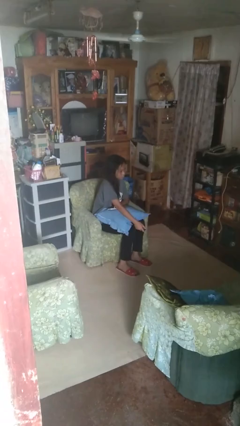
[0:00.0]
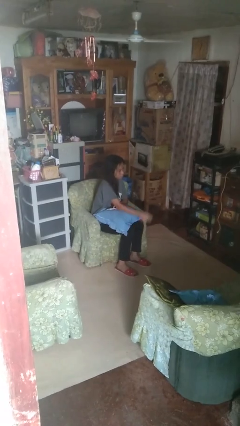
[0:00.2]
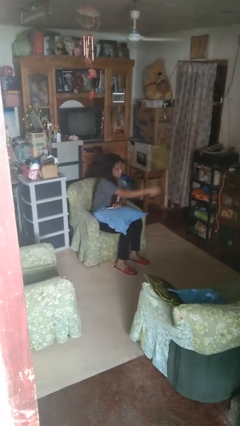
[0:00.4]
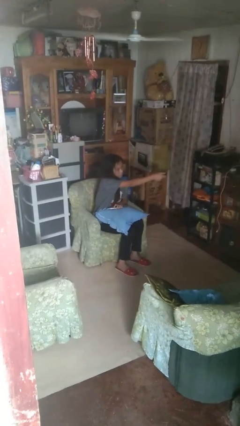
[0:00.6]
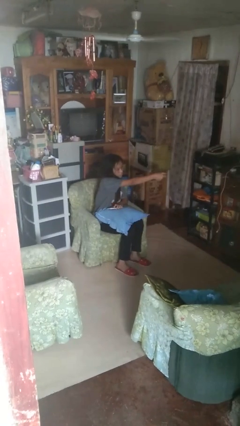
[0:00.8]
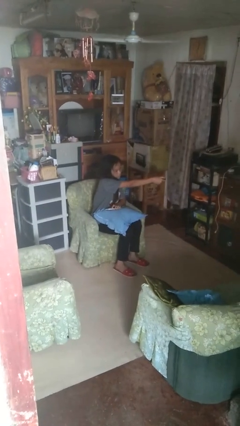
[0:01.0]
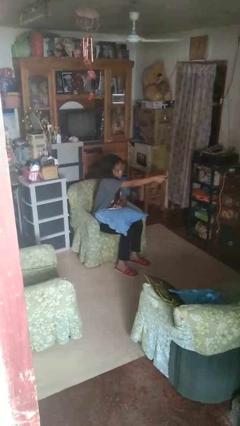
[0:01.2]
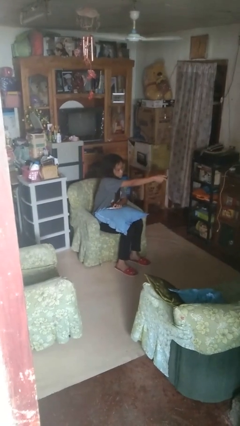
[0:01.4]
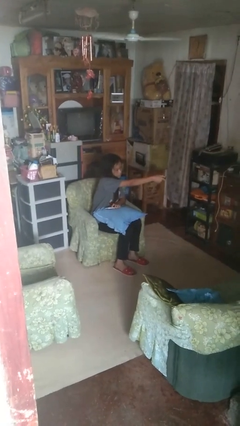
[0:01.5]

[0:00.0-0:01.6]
person uses television remote

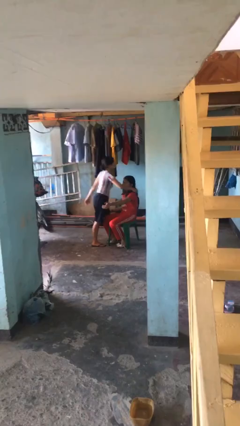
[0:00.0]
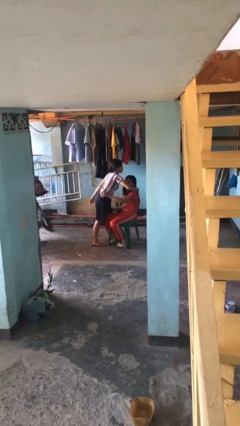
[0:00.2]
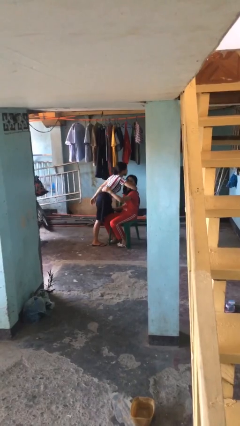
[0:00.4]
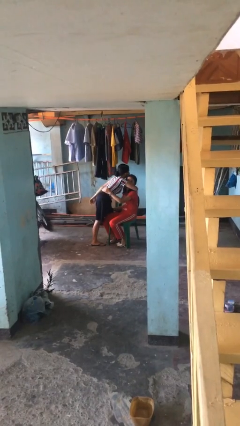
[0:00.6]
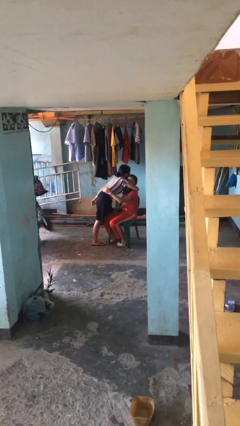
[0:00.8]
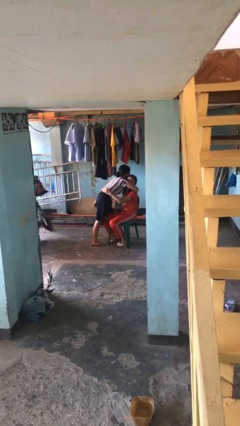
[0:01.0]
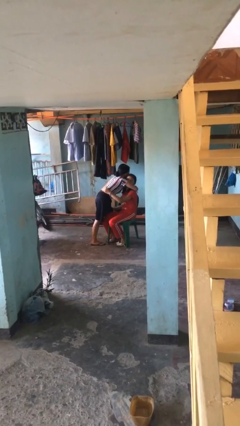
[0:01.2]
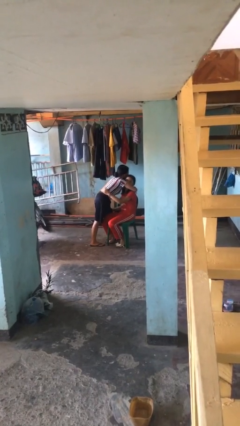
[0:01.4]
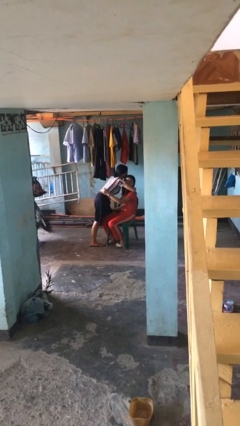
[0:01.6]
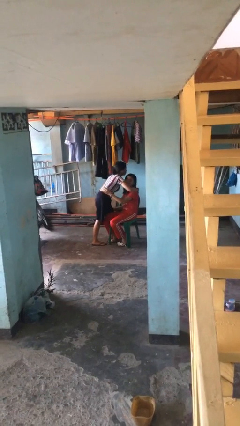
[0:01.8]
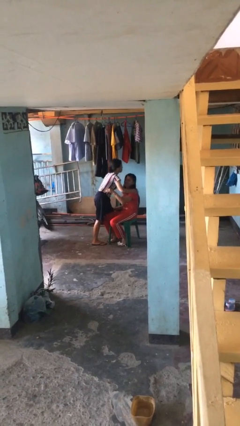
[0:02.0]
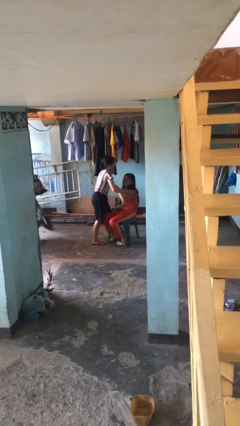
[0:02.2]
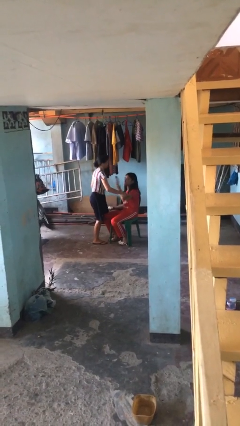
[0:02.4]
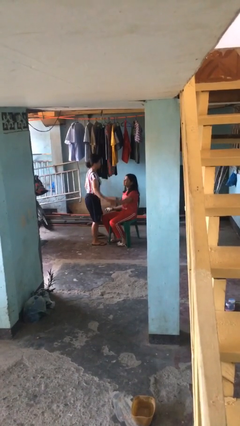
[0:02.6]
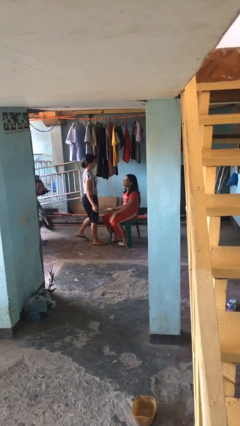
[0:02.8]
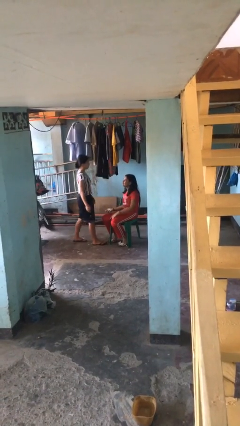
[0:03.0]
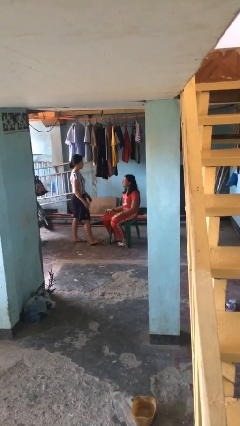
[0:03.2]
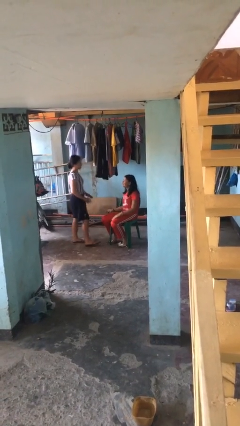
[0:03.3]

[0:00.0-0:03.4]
person embraces person

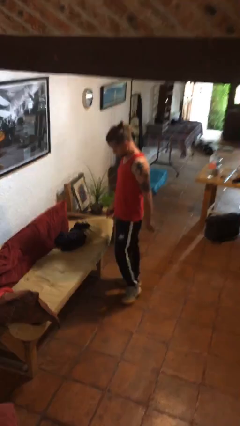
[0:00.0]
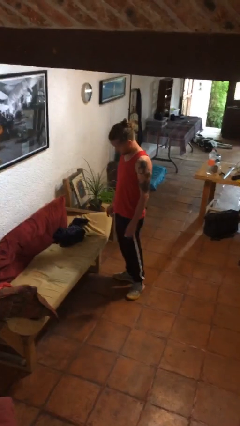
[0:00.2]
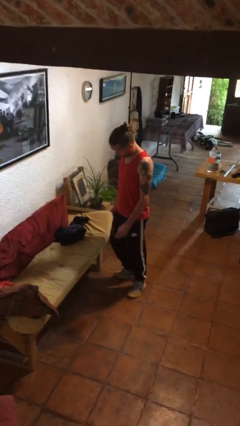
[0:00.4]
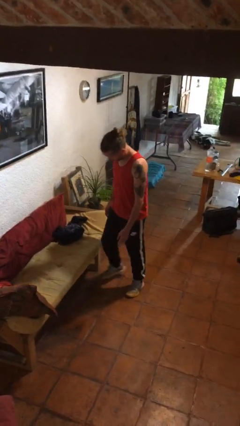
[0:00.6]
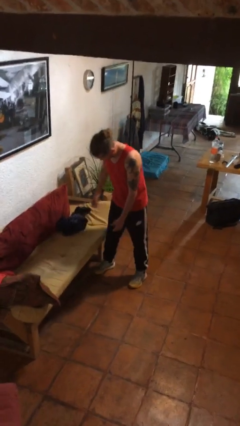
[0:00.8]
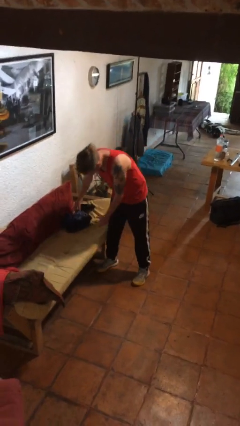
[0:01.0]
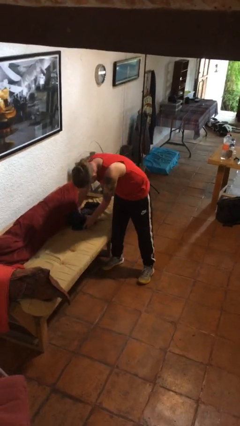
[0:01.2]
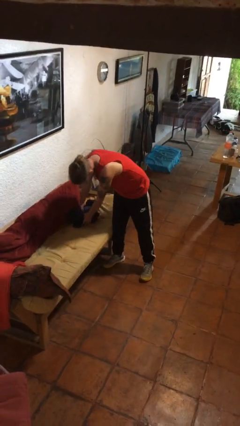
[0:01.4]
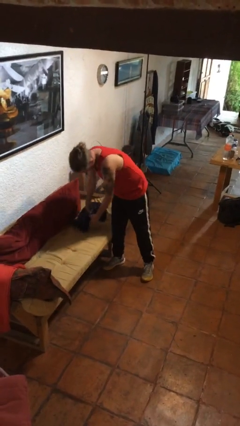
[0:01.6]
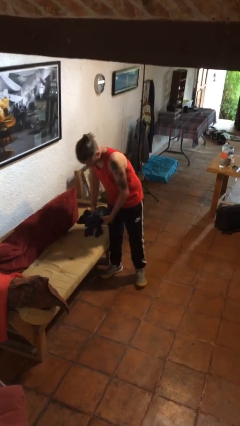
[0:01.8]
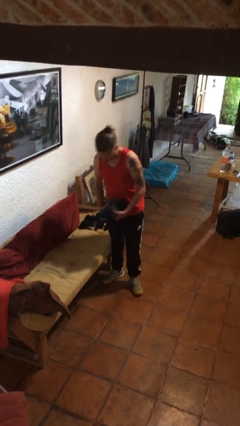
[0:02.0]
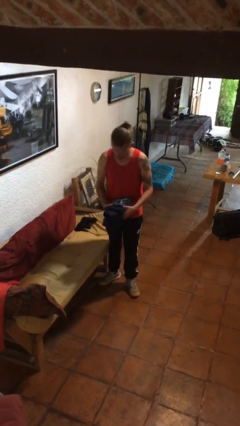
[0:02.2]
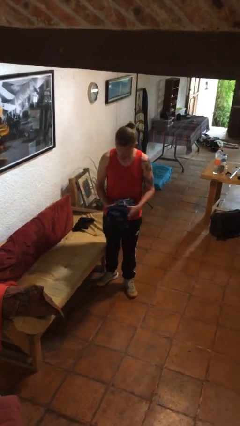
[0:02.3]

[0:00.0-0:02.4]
person picks up object from couch

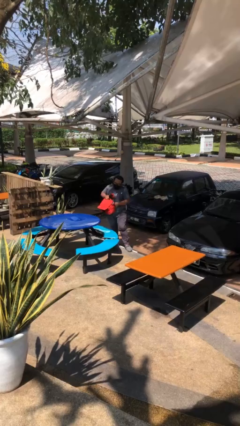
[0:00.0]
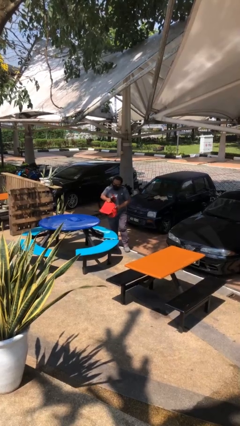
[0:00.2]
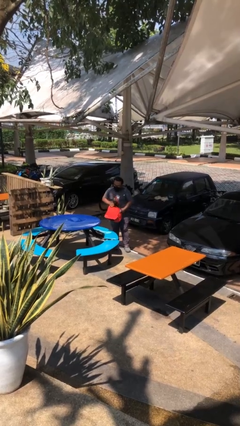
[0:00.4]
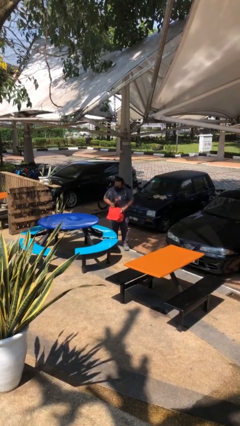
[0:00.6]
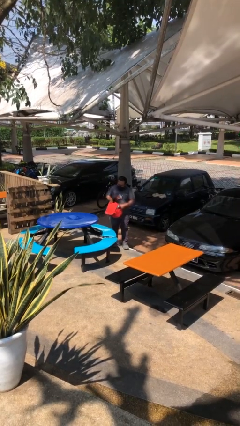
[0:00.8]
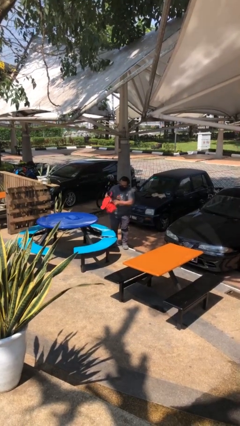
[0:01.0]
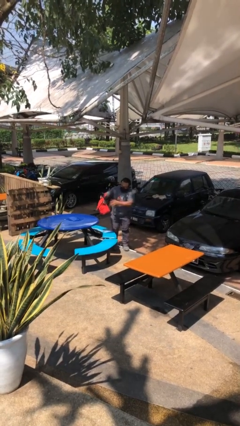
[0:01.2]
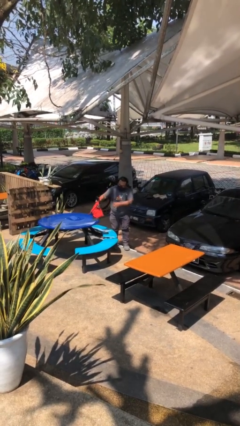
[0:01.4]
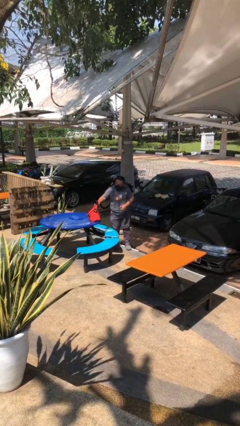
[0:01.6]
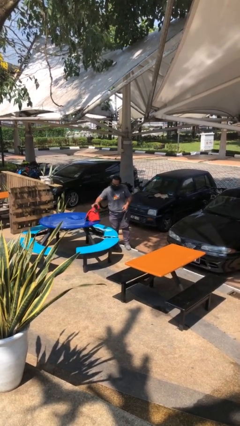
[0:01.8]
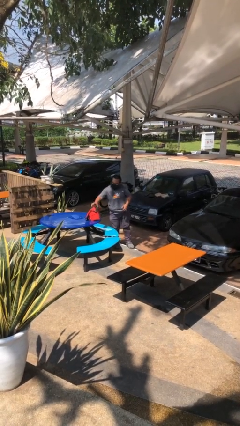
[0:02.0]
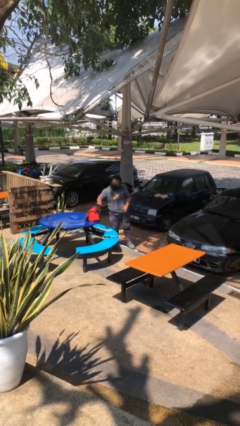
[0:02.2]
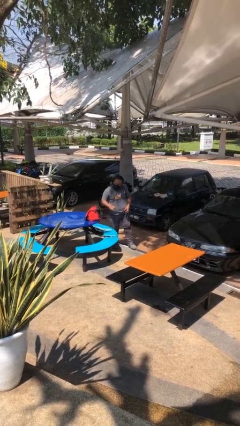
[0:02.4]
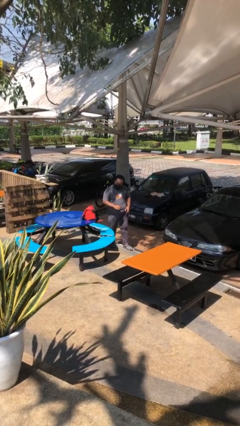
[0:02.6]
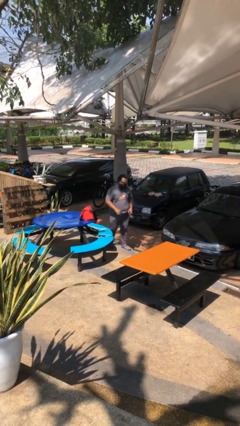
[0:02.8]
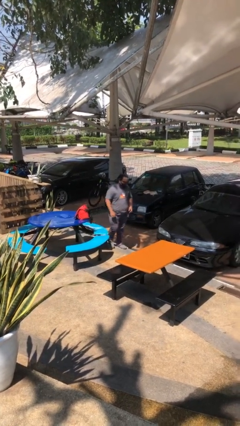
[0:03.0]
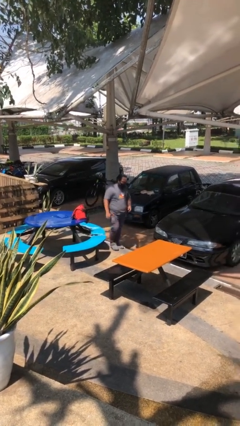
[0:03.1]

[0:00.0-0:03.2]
person puts down object on table

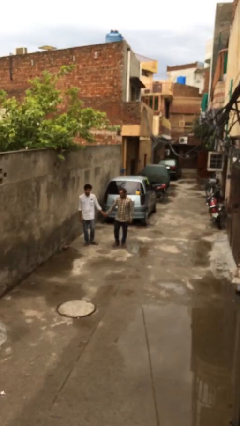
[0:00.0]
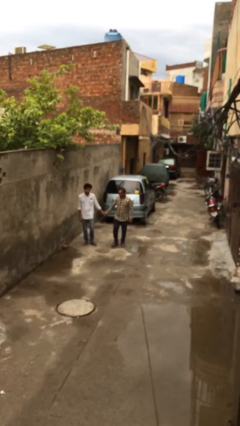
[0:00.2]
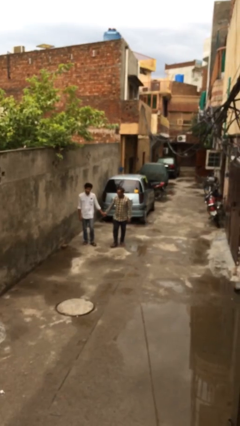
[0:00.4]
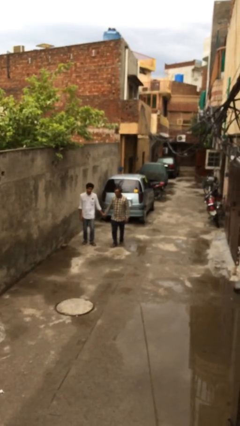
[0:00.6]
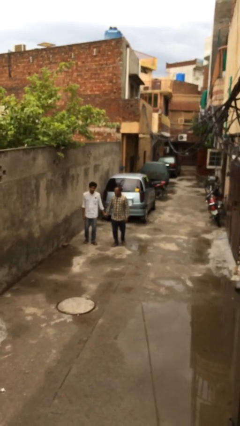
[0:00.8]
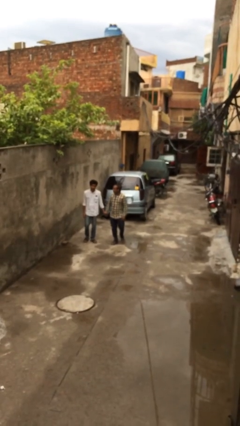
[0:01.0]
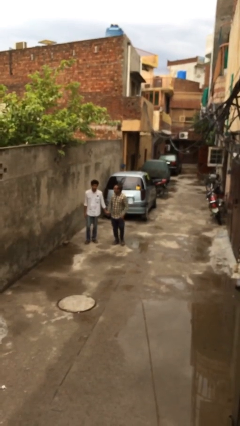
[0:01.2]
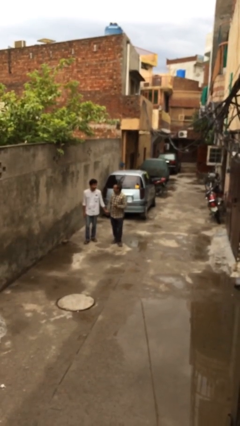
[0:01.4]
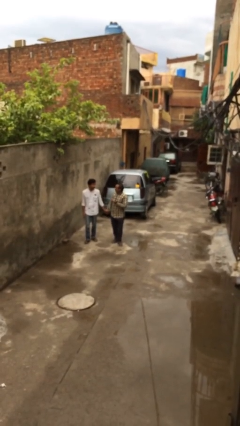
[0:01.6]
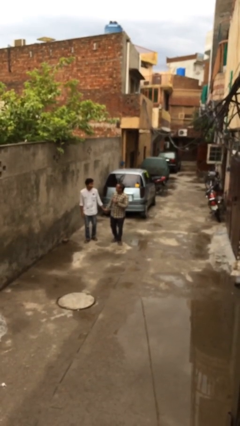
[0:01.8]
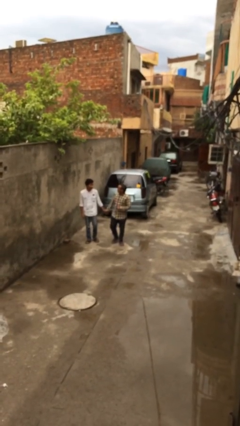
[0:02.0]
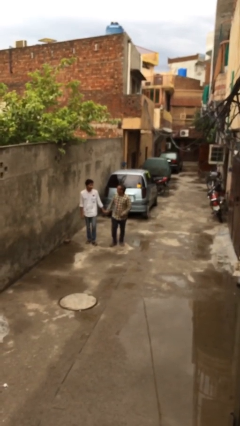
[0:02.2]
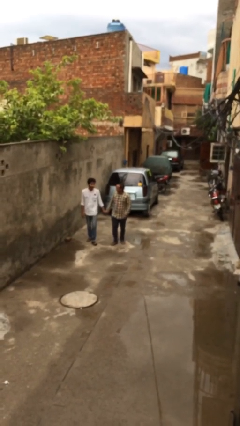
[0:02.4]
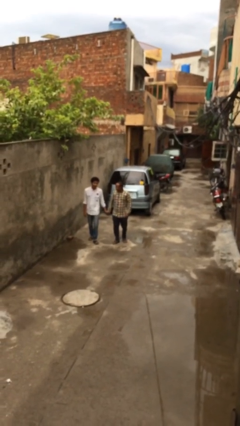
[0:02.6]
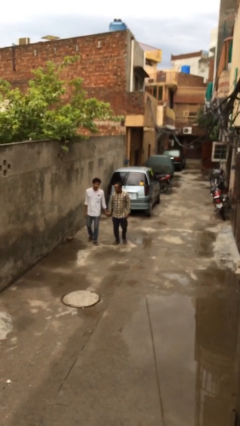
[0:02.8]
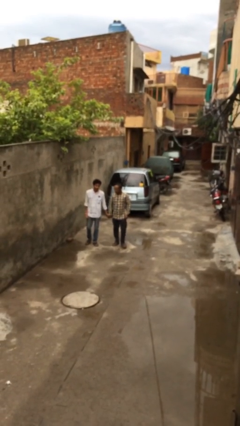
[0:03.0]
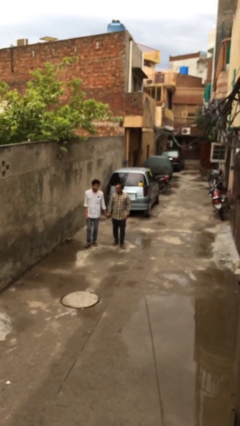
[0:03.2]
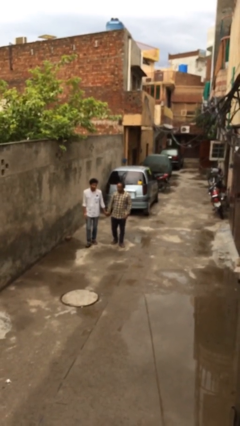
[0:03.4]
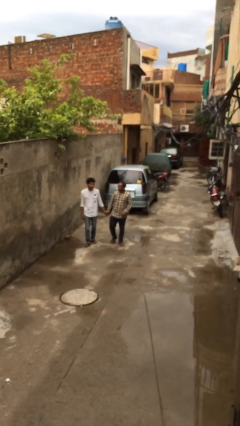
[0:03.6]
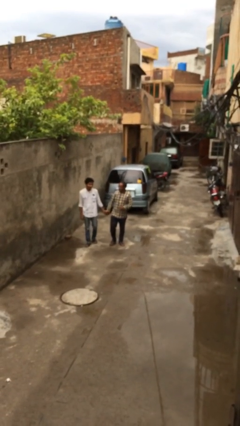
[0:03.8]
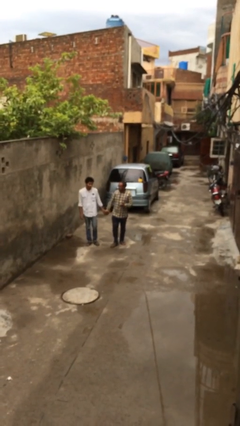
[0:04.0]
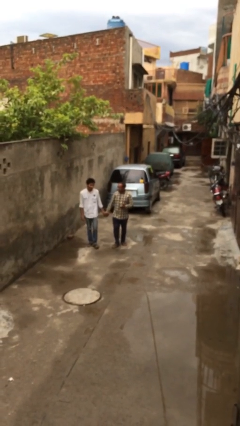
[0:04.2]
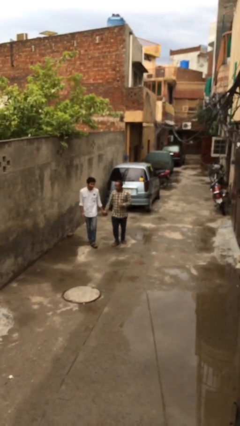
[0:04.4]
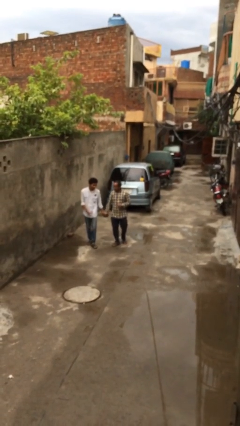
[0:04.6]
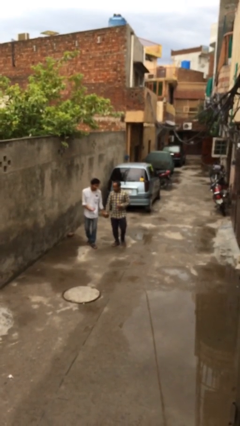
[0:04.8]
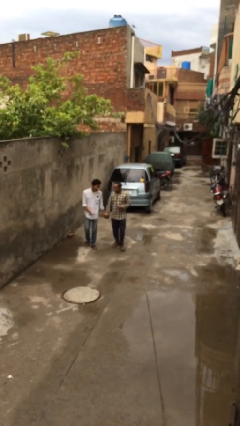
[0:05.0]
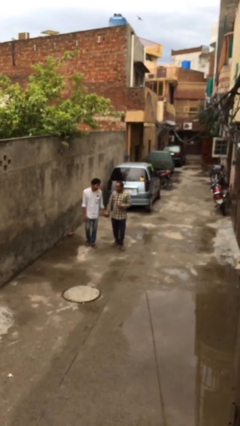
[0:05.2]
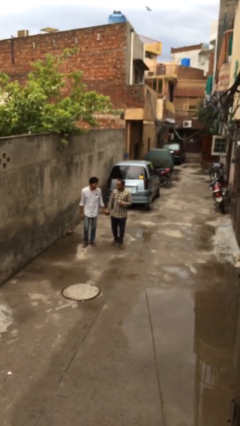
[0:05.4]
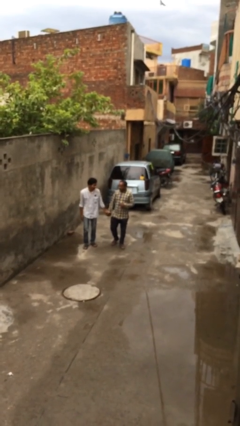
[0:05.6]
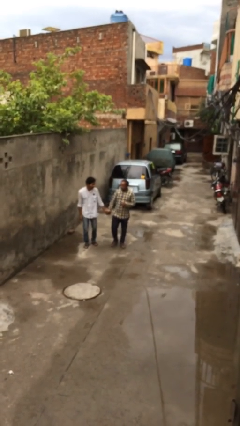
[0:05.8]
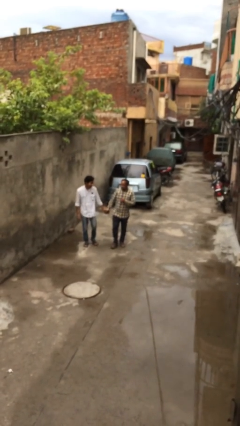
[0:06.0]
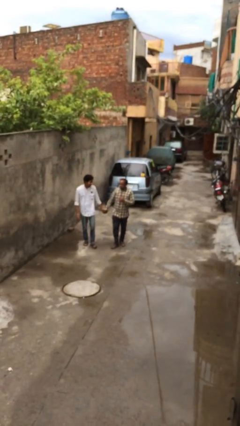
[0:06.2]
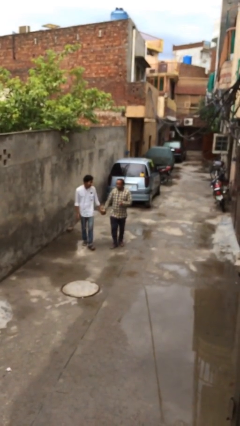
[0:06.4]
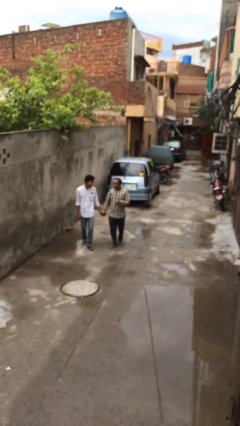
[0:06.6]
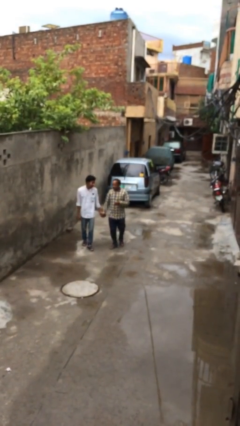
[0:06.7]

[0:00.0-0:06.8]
person holds hand
